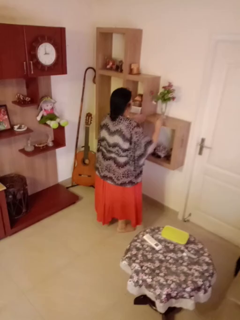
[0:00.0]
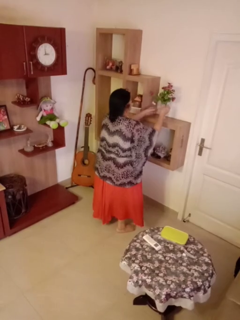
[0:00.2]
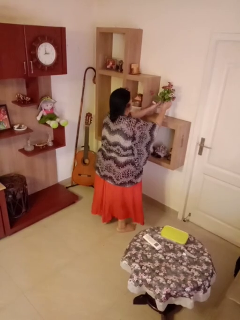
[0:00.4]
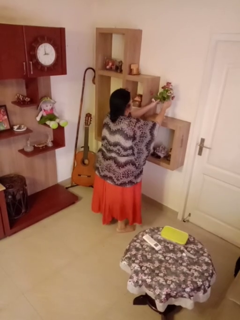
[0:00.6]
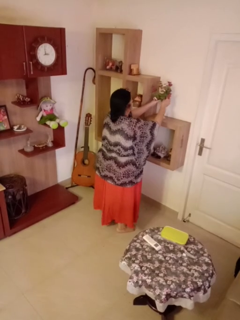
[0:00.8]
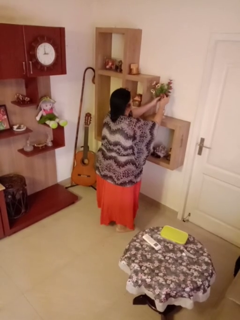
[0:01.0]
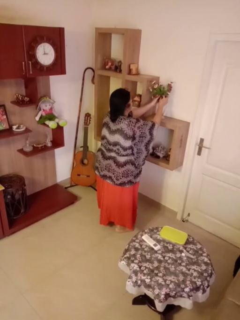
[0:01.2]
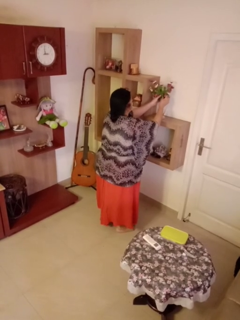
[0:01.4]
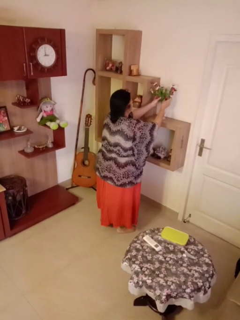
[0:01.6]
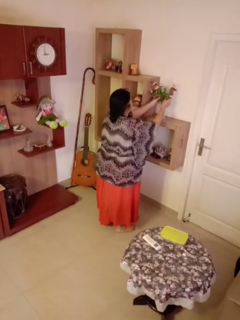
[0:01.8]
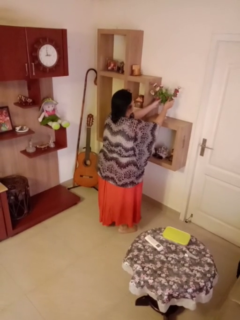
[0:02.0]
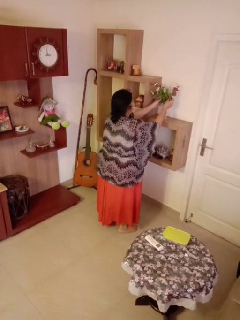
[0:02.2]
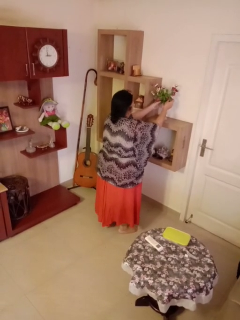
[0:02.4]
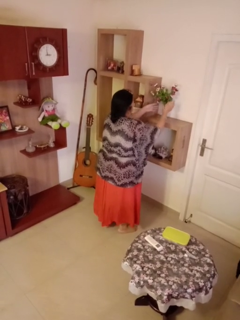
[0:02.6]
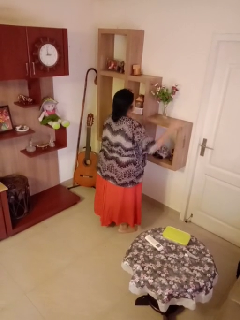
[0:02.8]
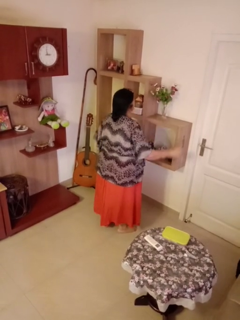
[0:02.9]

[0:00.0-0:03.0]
person arranges flowers in vase

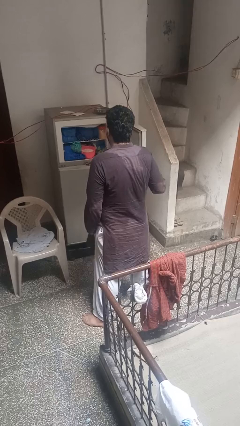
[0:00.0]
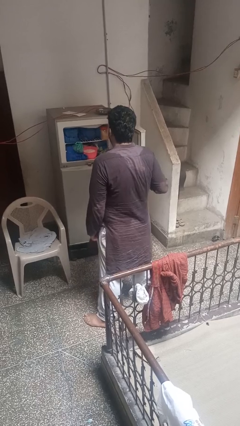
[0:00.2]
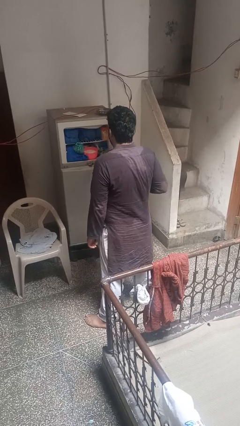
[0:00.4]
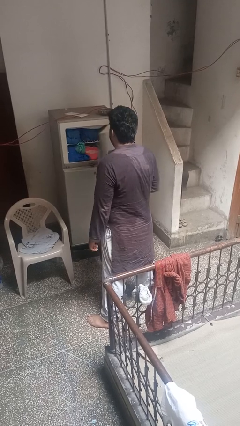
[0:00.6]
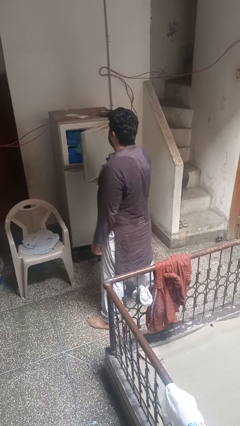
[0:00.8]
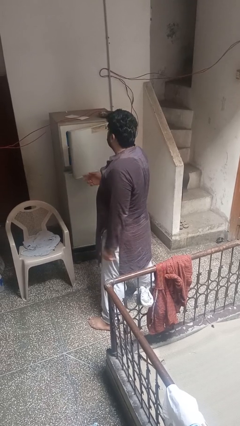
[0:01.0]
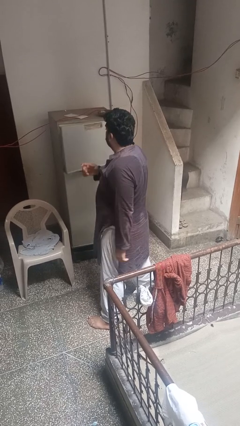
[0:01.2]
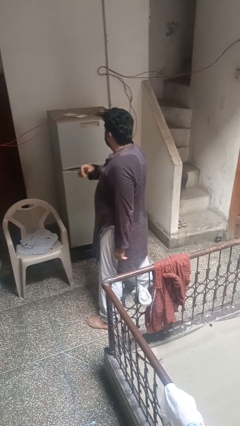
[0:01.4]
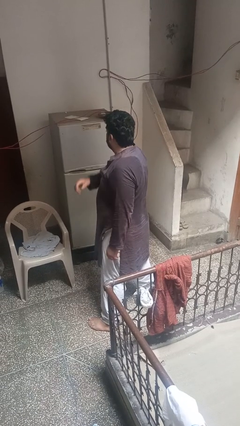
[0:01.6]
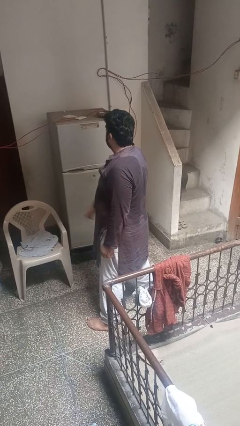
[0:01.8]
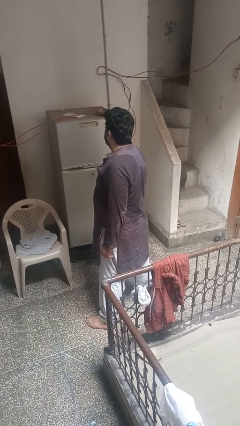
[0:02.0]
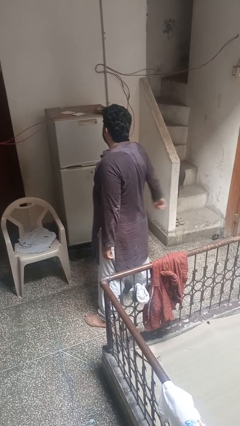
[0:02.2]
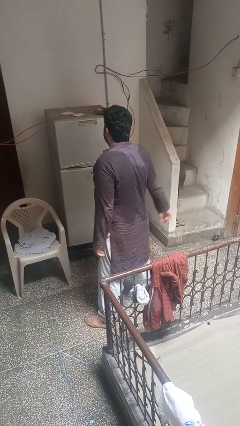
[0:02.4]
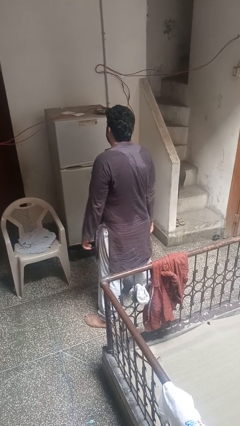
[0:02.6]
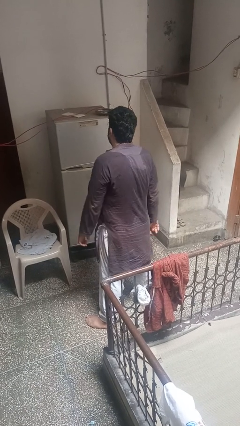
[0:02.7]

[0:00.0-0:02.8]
person closes refrigerator

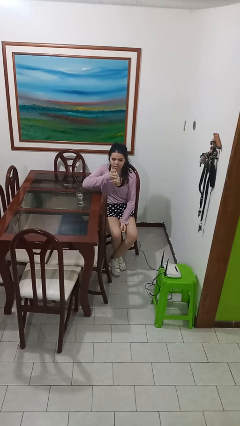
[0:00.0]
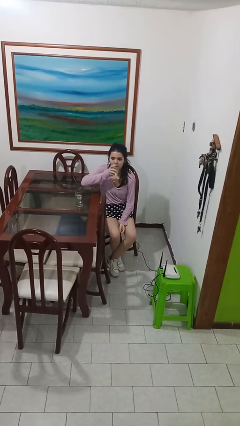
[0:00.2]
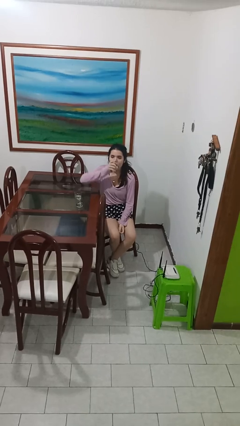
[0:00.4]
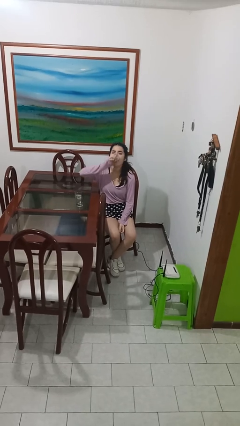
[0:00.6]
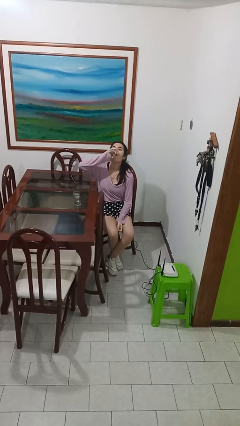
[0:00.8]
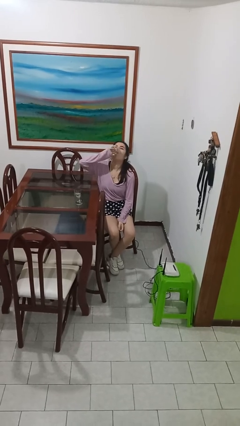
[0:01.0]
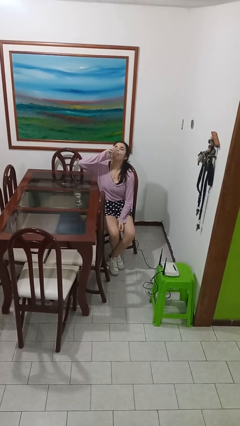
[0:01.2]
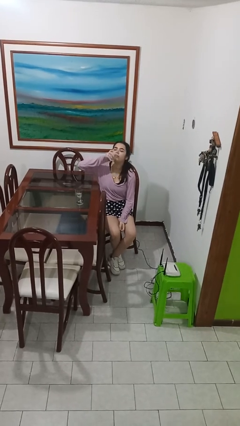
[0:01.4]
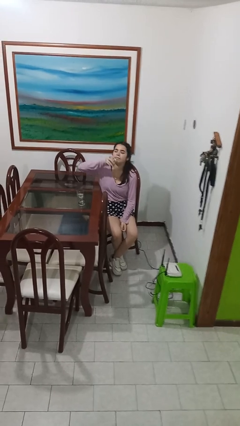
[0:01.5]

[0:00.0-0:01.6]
person drinks from shotglass

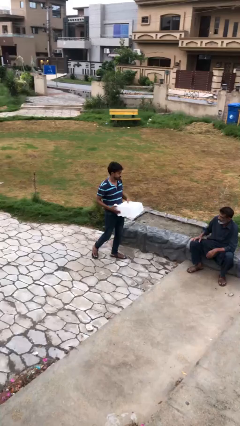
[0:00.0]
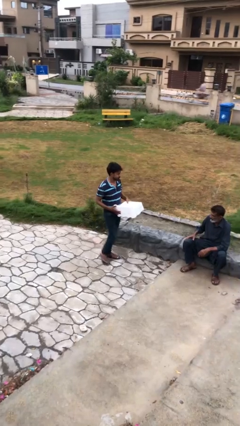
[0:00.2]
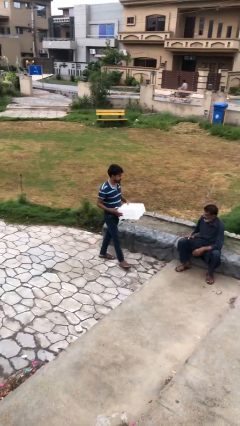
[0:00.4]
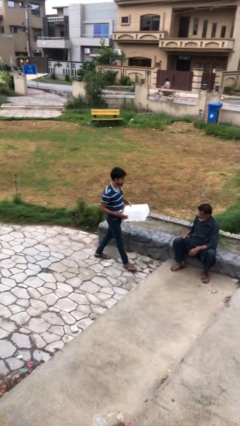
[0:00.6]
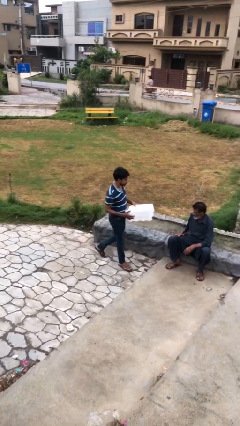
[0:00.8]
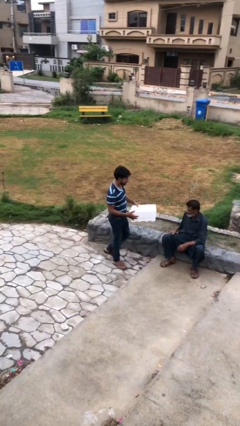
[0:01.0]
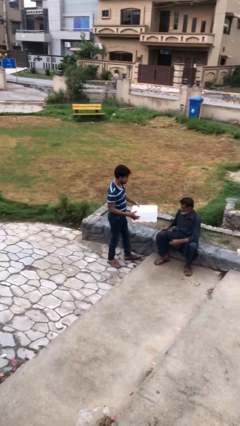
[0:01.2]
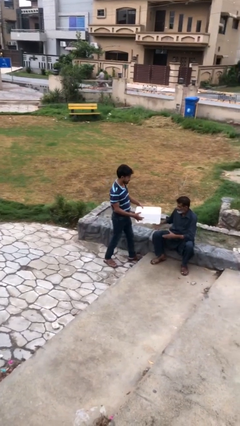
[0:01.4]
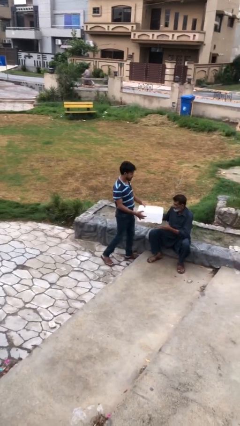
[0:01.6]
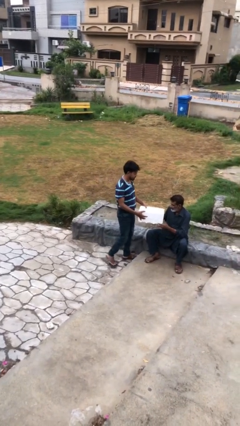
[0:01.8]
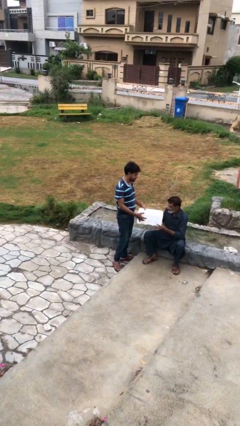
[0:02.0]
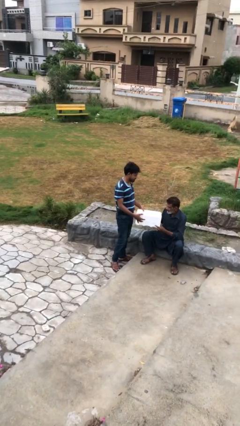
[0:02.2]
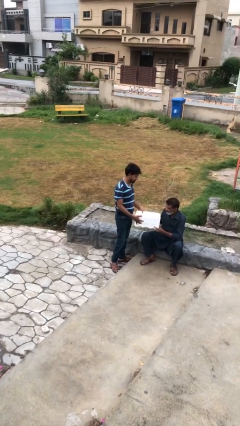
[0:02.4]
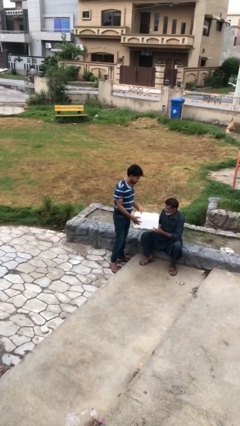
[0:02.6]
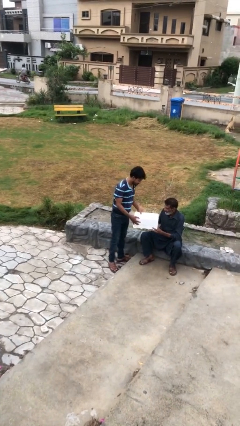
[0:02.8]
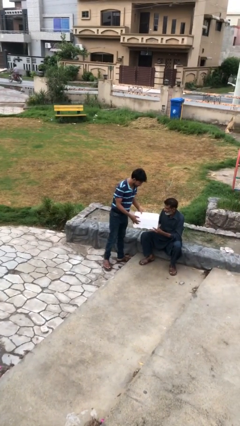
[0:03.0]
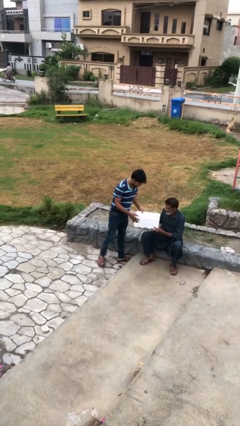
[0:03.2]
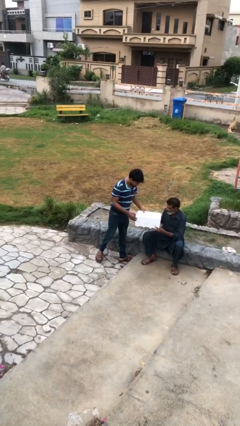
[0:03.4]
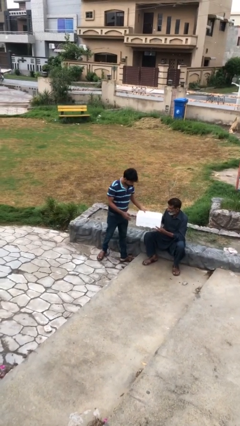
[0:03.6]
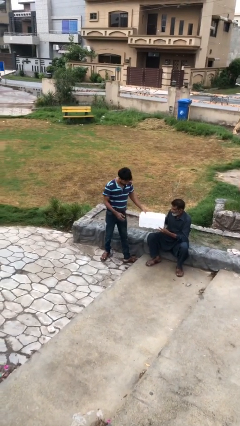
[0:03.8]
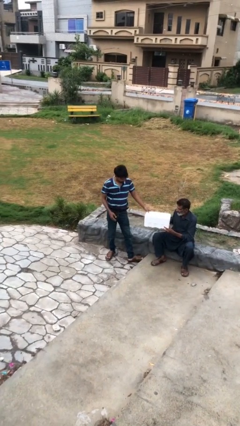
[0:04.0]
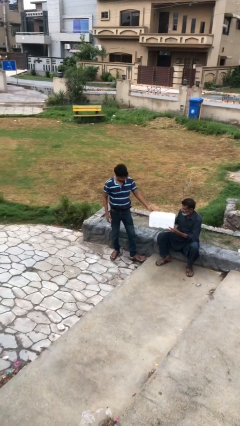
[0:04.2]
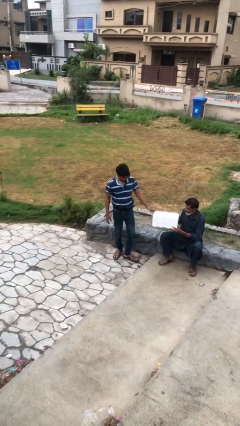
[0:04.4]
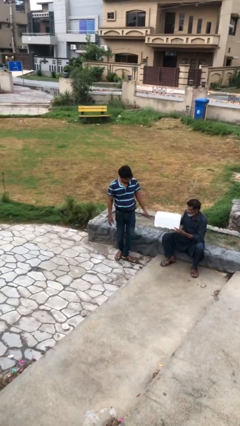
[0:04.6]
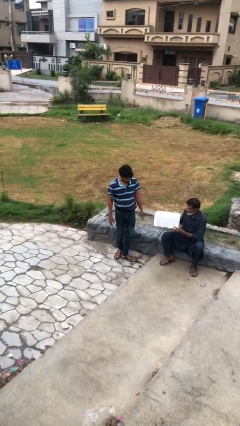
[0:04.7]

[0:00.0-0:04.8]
person transfers object to person

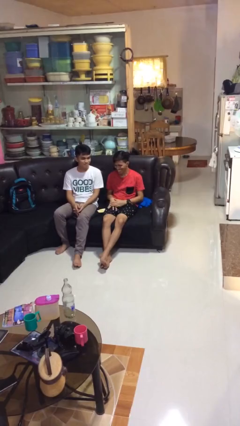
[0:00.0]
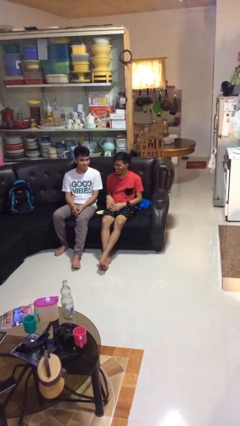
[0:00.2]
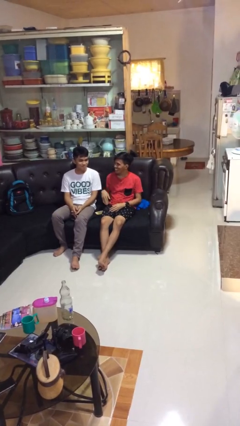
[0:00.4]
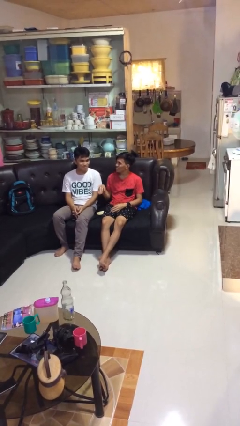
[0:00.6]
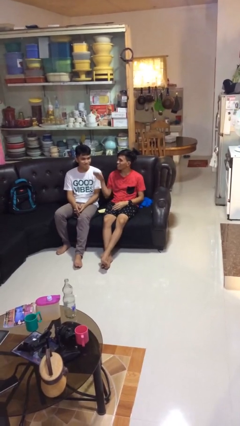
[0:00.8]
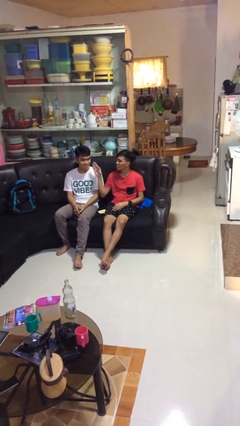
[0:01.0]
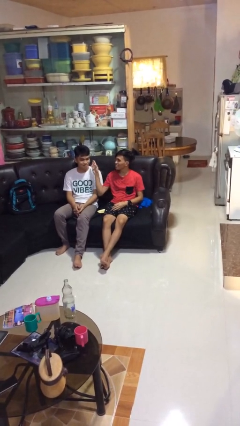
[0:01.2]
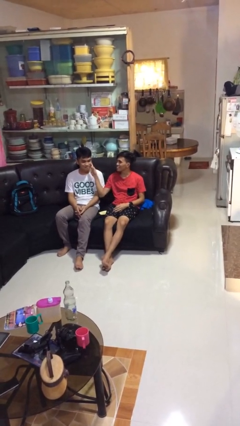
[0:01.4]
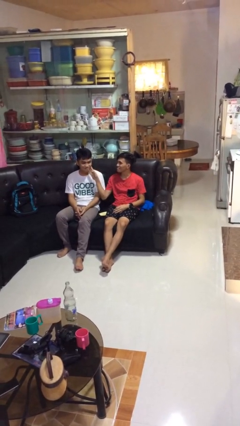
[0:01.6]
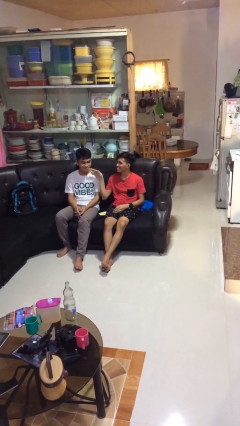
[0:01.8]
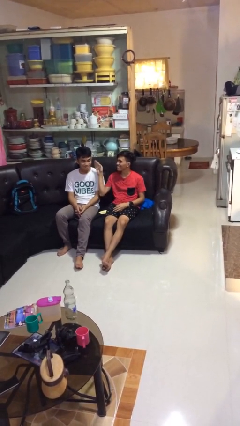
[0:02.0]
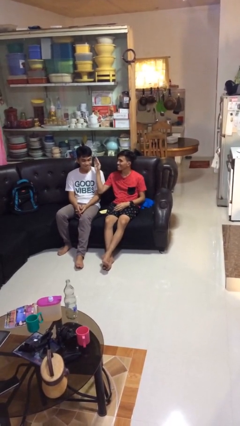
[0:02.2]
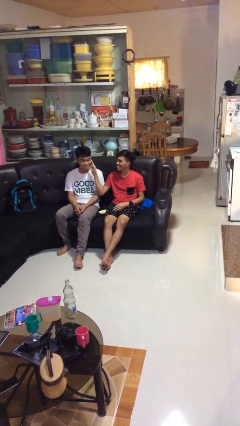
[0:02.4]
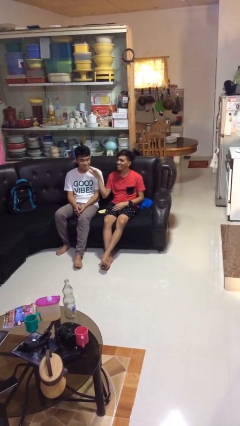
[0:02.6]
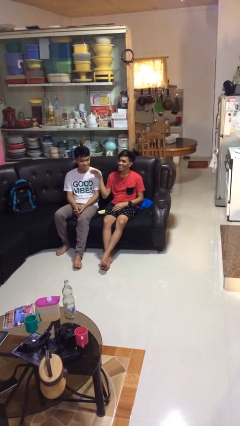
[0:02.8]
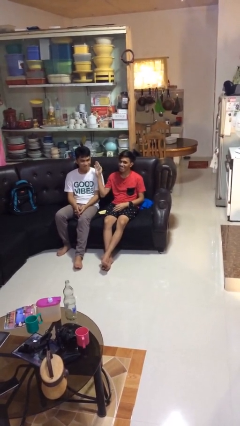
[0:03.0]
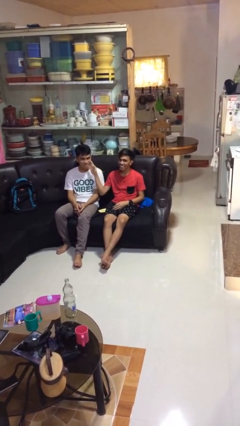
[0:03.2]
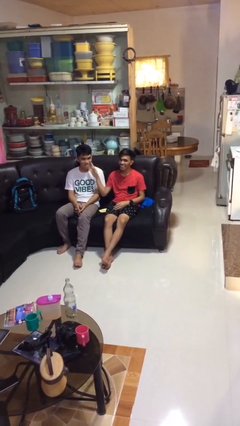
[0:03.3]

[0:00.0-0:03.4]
person touches face of person

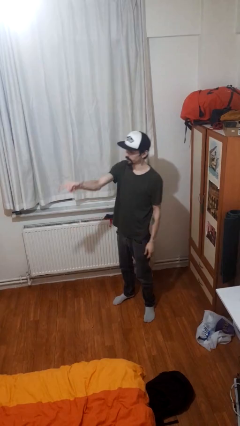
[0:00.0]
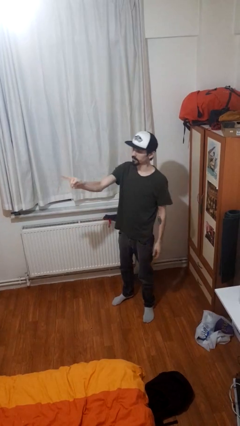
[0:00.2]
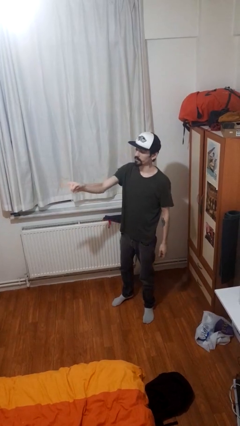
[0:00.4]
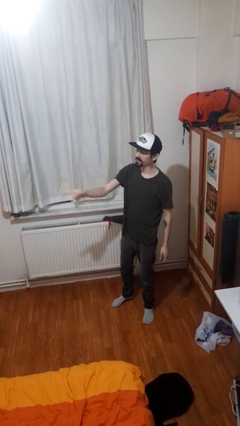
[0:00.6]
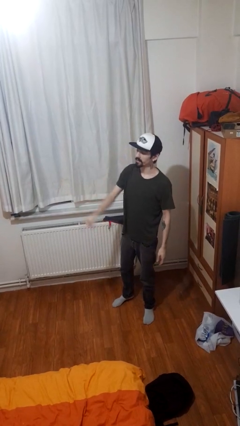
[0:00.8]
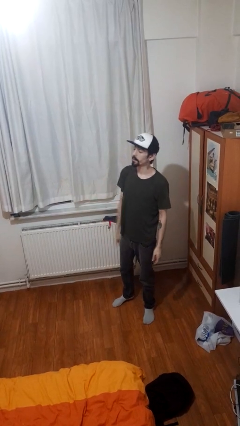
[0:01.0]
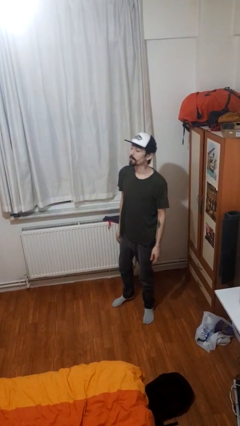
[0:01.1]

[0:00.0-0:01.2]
person points at person

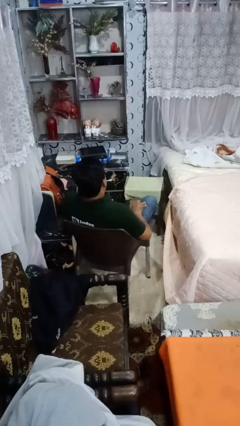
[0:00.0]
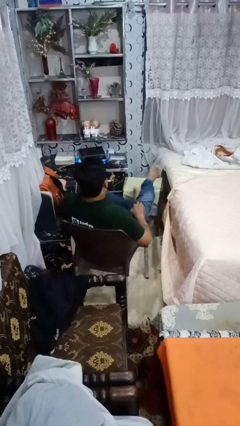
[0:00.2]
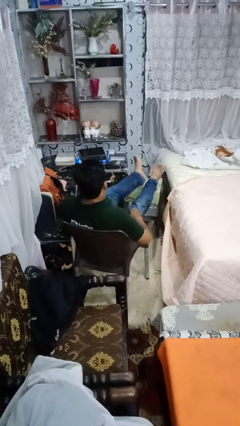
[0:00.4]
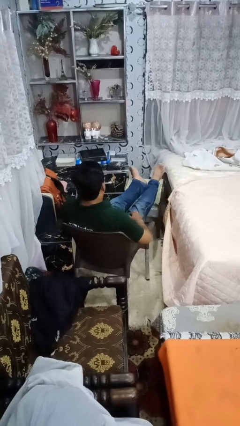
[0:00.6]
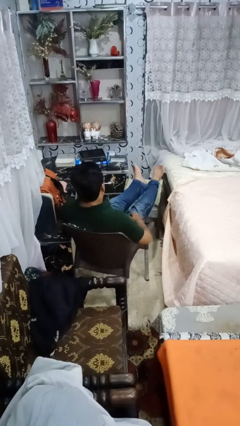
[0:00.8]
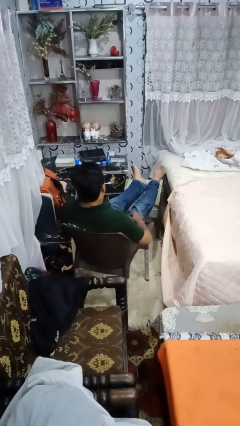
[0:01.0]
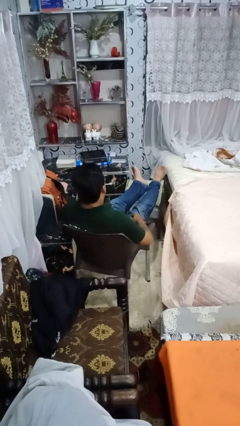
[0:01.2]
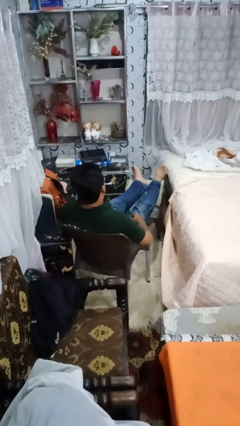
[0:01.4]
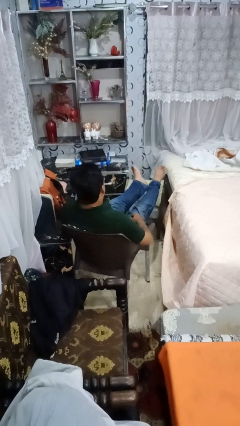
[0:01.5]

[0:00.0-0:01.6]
person puts feet up
